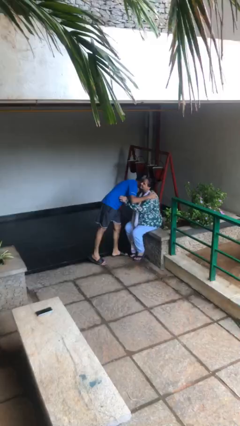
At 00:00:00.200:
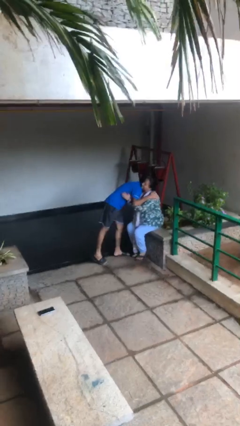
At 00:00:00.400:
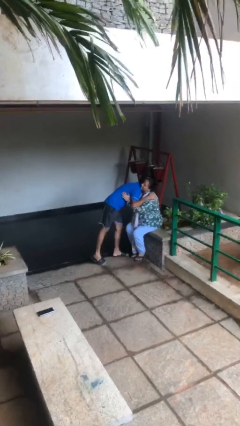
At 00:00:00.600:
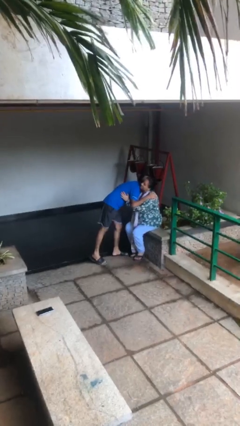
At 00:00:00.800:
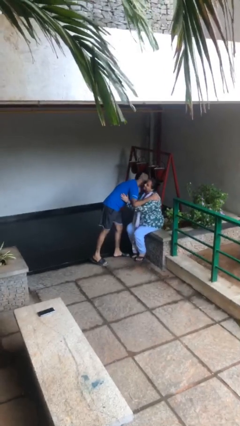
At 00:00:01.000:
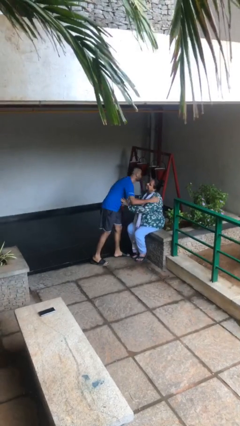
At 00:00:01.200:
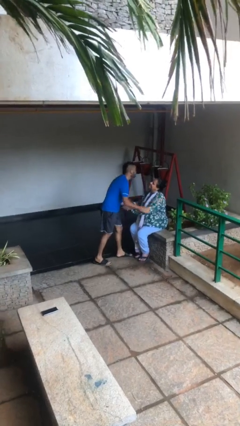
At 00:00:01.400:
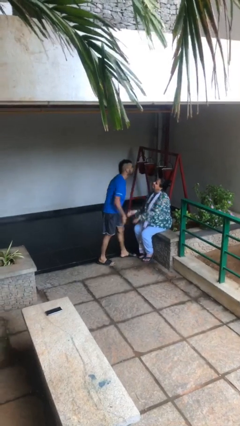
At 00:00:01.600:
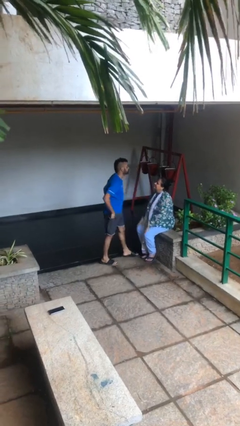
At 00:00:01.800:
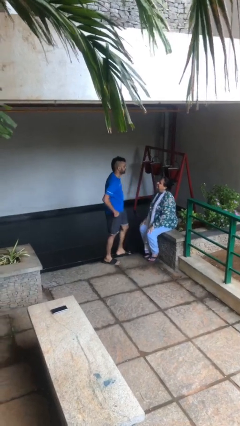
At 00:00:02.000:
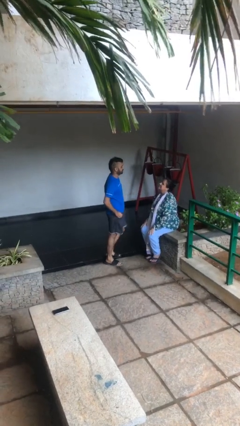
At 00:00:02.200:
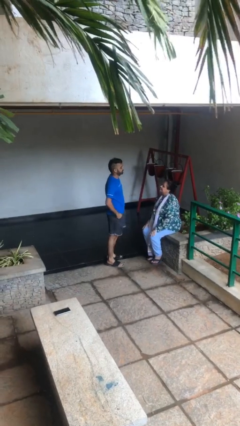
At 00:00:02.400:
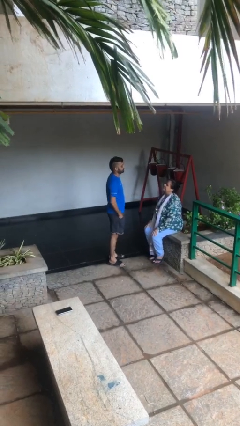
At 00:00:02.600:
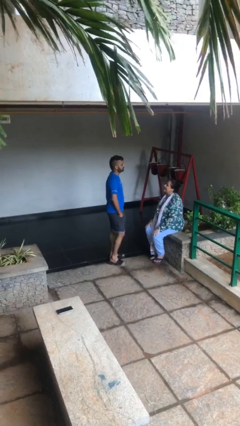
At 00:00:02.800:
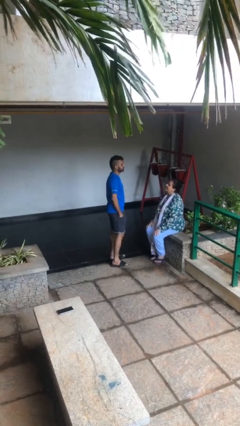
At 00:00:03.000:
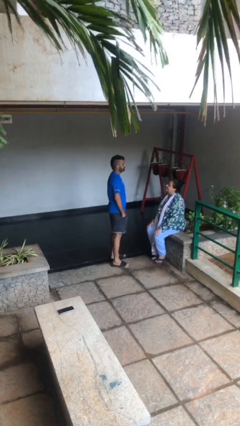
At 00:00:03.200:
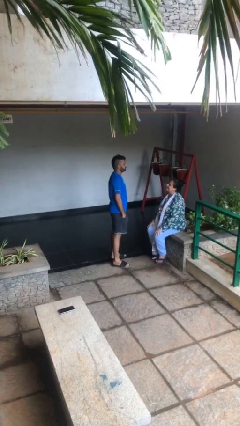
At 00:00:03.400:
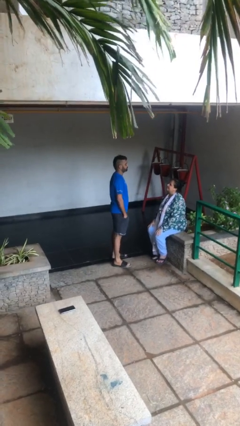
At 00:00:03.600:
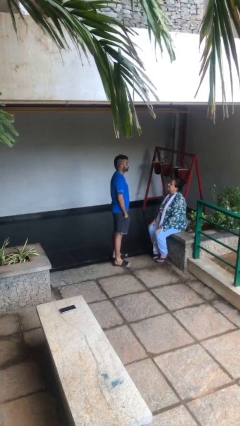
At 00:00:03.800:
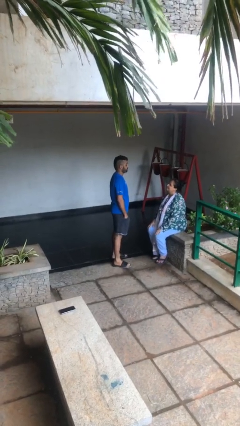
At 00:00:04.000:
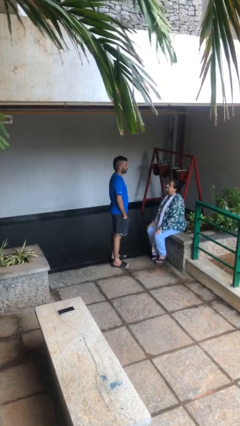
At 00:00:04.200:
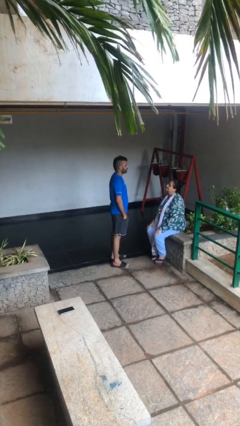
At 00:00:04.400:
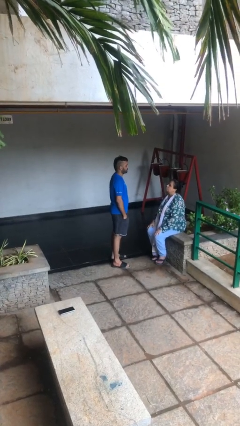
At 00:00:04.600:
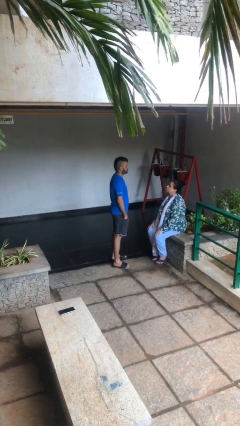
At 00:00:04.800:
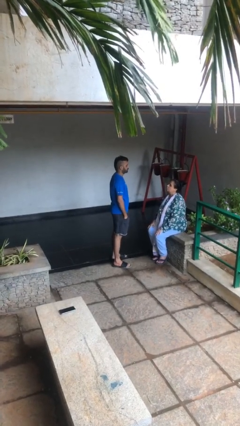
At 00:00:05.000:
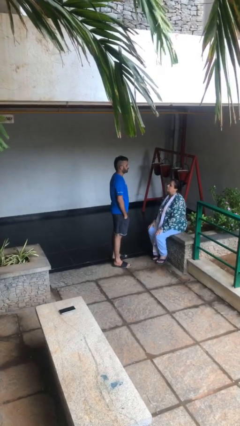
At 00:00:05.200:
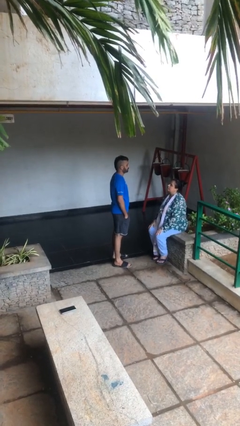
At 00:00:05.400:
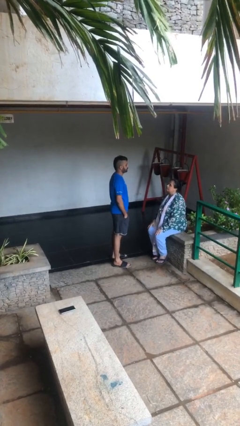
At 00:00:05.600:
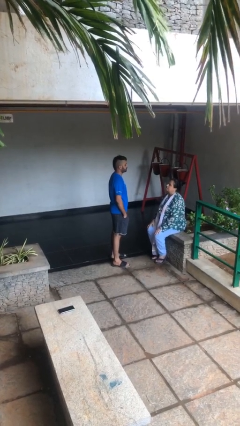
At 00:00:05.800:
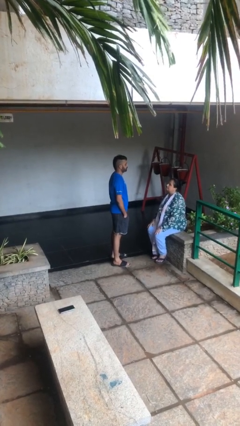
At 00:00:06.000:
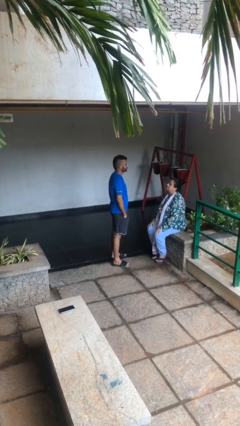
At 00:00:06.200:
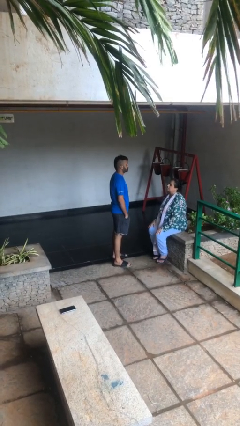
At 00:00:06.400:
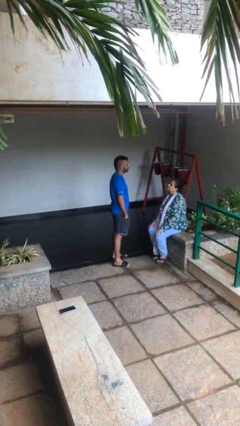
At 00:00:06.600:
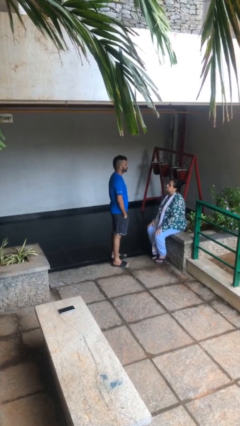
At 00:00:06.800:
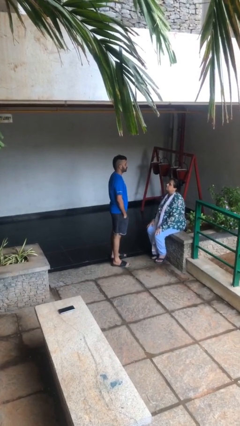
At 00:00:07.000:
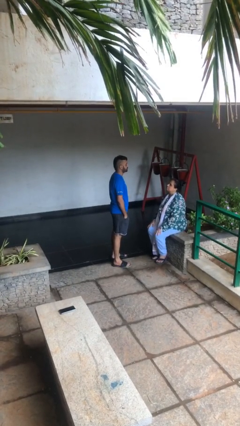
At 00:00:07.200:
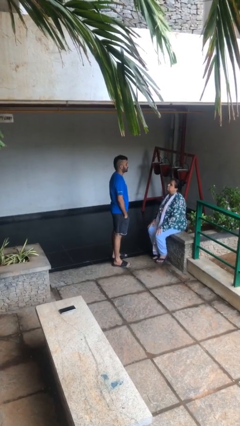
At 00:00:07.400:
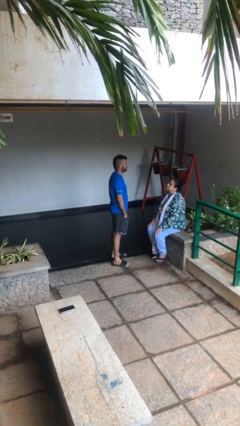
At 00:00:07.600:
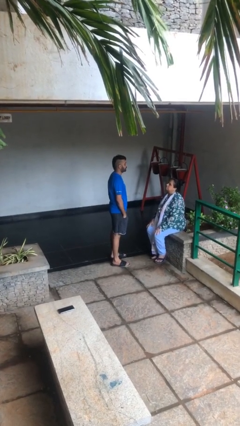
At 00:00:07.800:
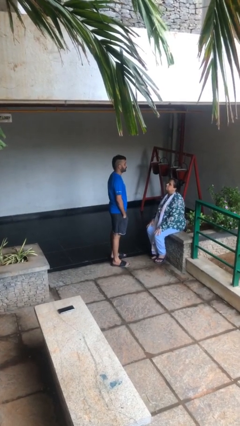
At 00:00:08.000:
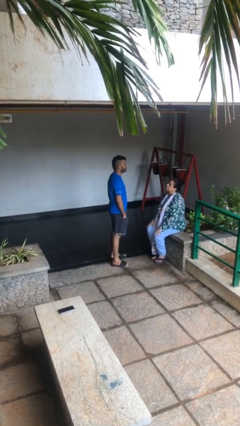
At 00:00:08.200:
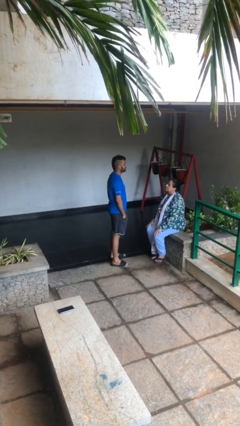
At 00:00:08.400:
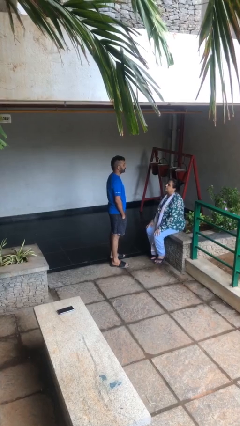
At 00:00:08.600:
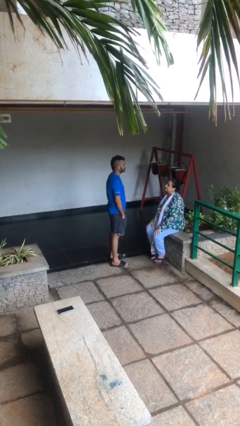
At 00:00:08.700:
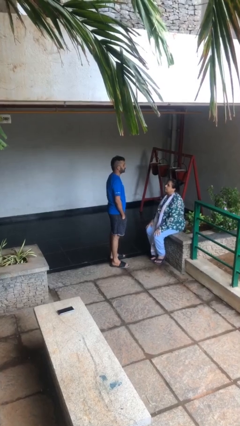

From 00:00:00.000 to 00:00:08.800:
person embraces person

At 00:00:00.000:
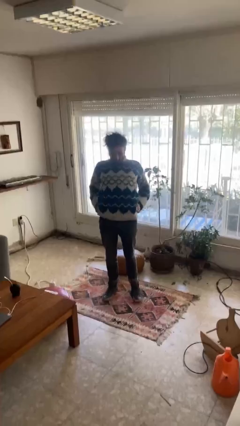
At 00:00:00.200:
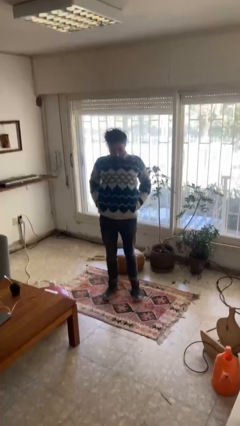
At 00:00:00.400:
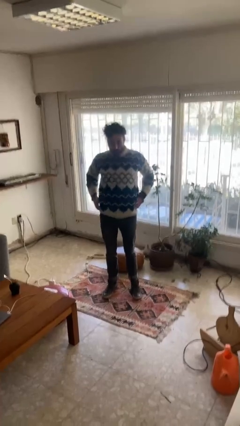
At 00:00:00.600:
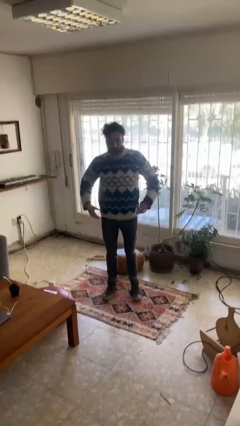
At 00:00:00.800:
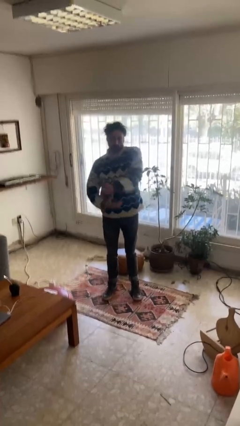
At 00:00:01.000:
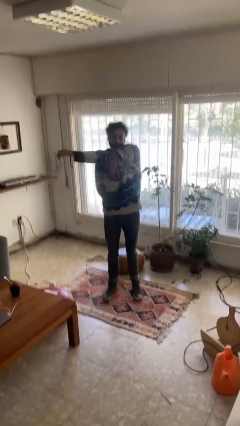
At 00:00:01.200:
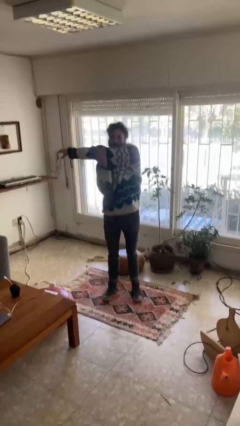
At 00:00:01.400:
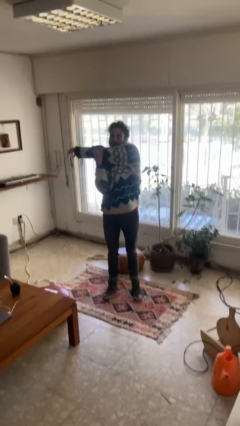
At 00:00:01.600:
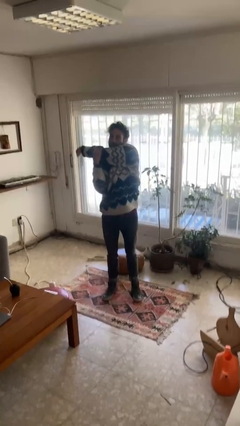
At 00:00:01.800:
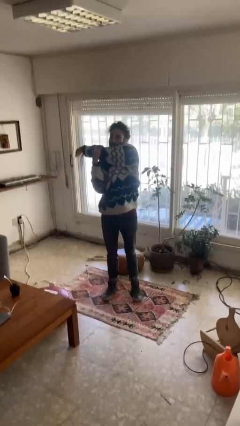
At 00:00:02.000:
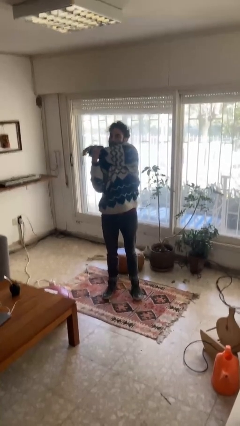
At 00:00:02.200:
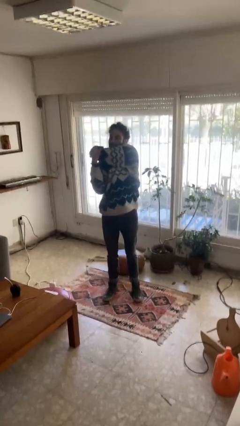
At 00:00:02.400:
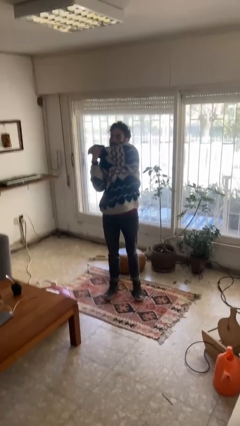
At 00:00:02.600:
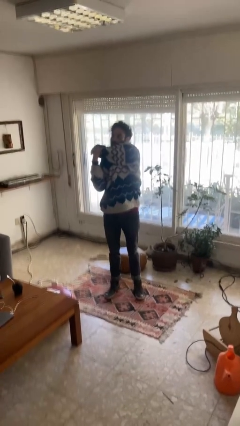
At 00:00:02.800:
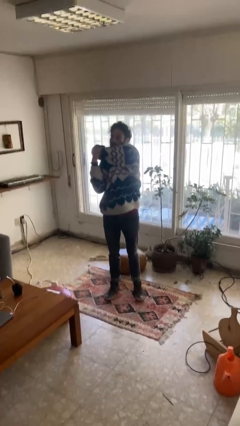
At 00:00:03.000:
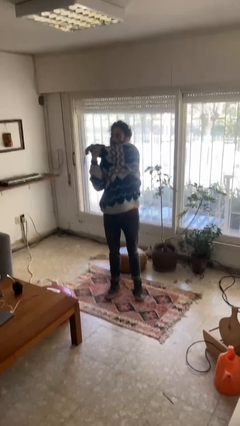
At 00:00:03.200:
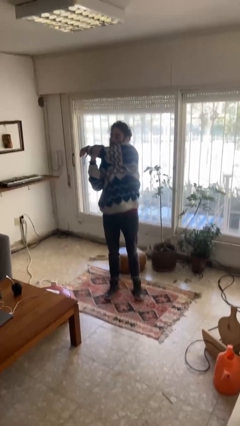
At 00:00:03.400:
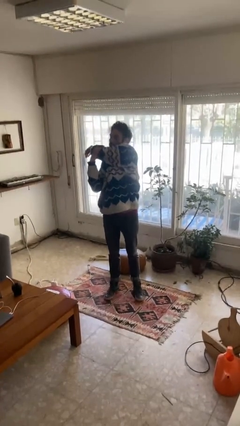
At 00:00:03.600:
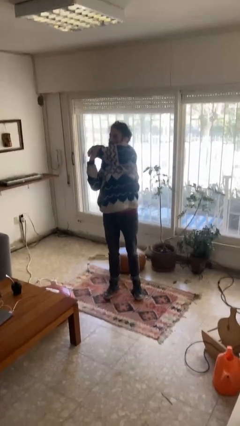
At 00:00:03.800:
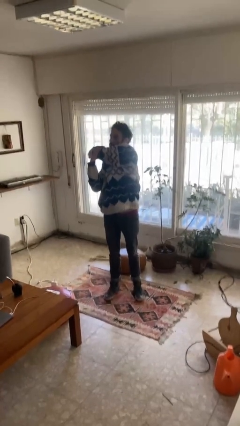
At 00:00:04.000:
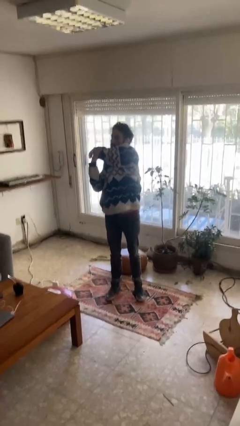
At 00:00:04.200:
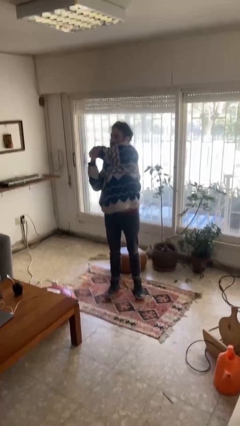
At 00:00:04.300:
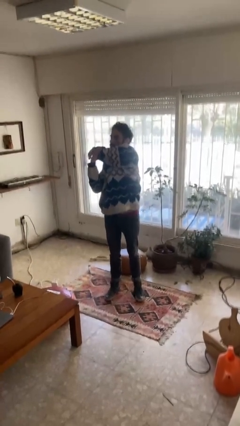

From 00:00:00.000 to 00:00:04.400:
person stretches arms to side

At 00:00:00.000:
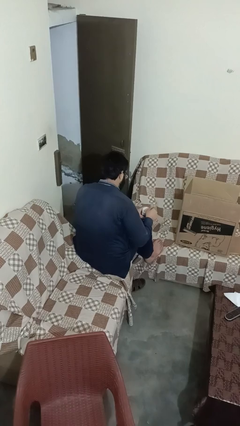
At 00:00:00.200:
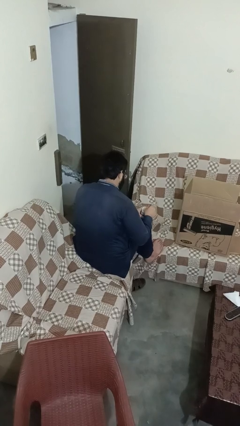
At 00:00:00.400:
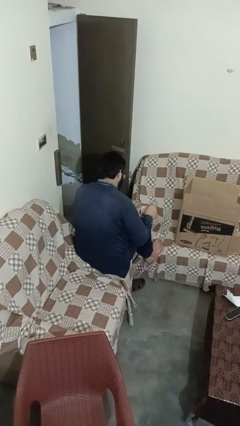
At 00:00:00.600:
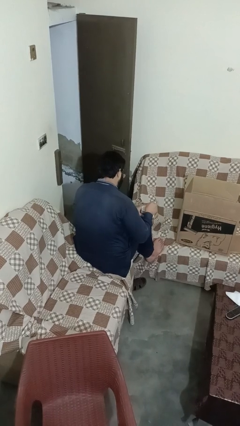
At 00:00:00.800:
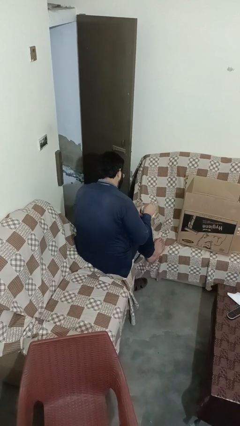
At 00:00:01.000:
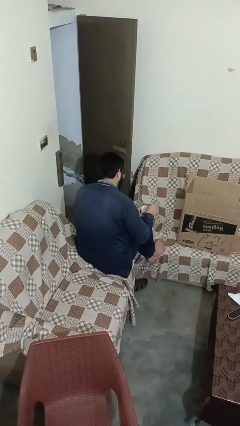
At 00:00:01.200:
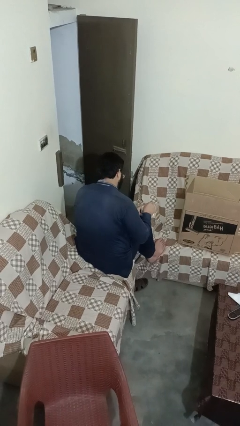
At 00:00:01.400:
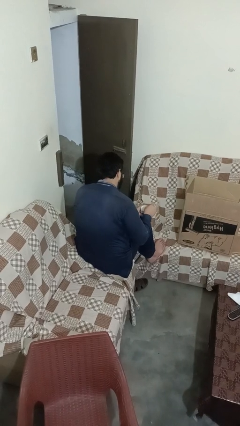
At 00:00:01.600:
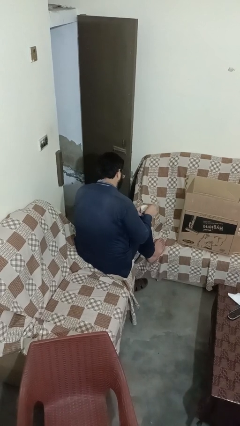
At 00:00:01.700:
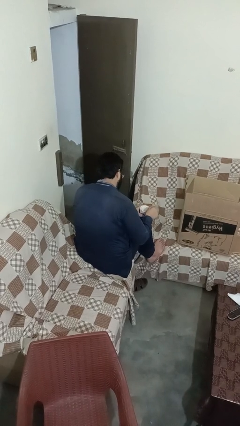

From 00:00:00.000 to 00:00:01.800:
person stirs mug

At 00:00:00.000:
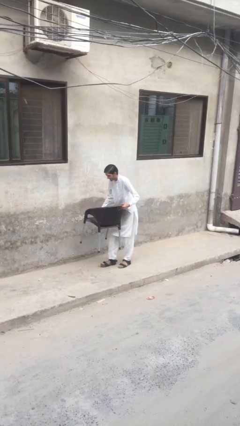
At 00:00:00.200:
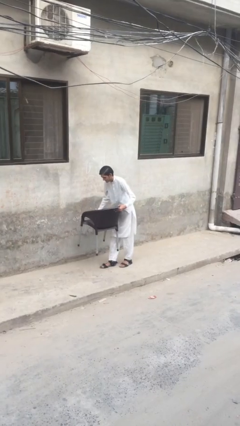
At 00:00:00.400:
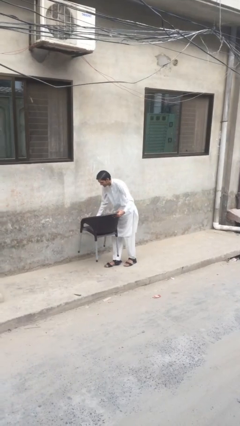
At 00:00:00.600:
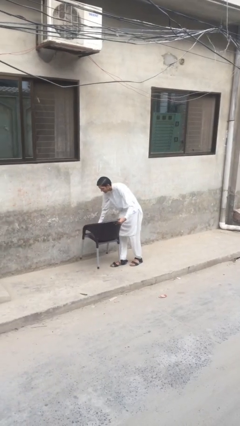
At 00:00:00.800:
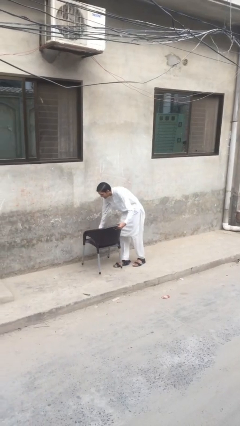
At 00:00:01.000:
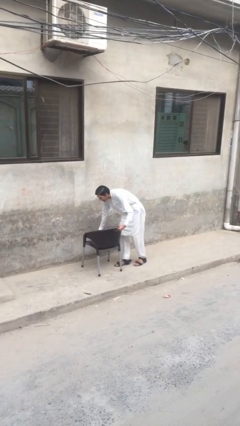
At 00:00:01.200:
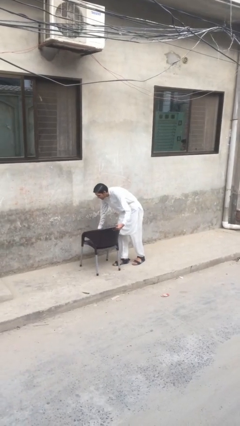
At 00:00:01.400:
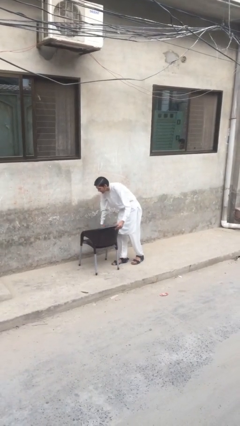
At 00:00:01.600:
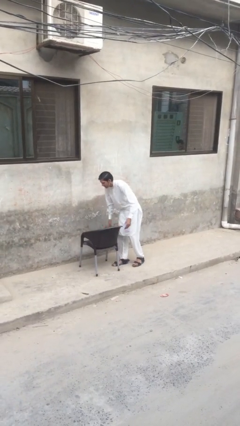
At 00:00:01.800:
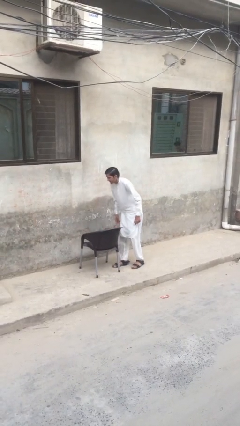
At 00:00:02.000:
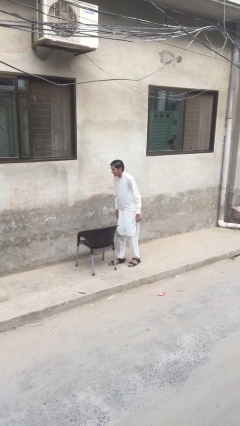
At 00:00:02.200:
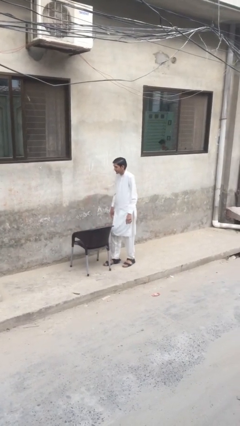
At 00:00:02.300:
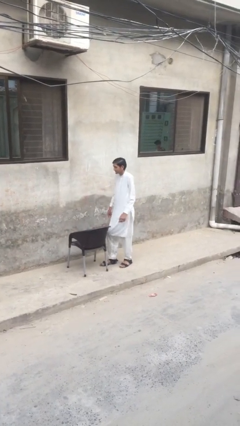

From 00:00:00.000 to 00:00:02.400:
person puts down object on floor

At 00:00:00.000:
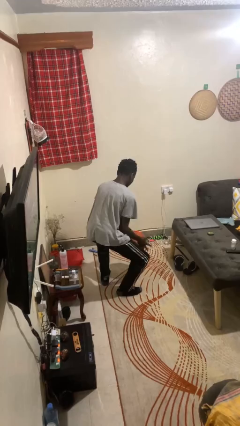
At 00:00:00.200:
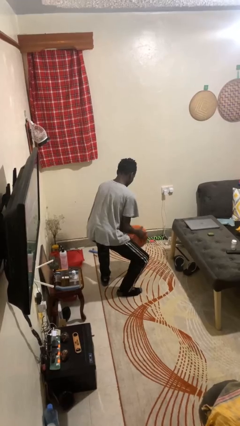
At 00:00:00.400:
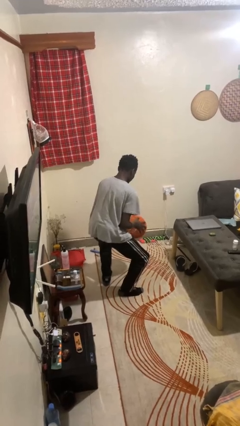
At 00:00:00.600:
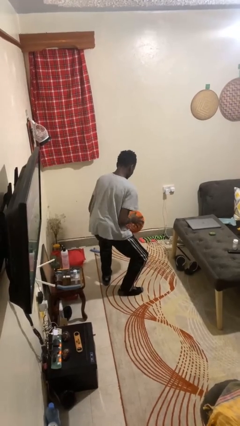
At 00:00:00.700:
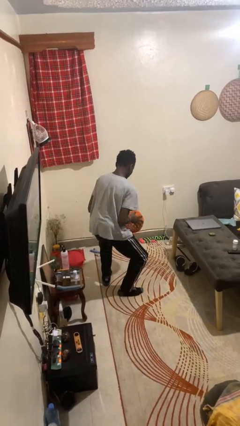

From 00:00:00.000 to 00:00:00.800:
person bounces ball on floor
